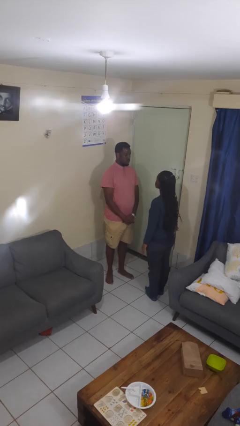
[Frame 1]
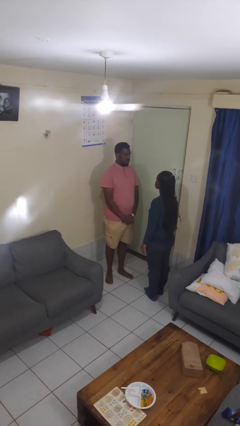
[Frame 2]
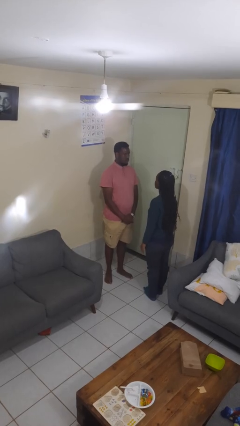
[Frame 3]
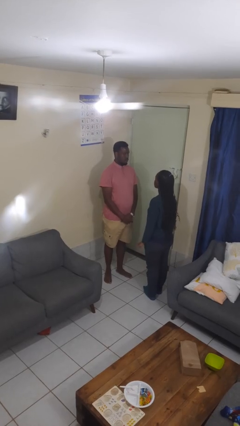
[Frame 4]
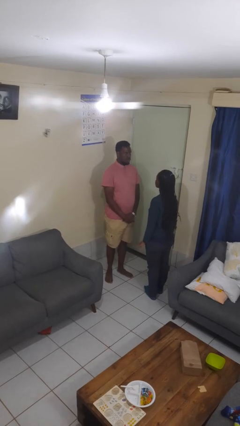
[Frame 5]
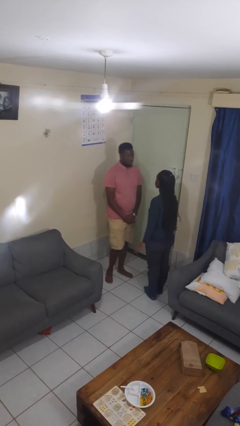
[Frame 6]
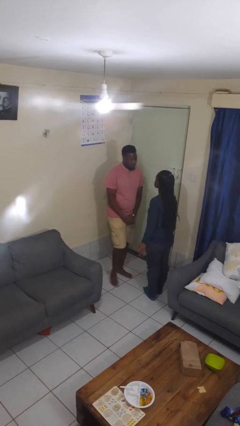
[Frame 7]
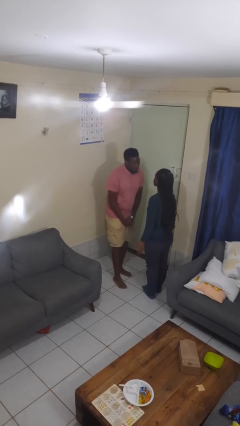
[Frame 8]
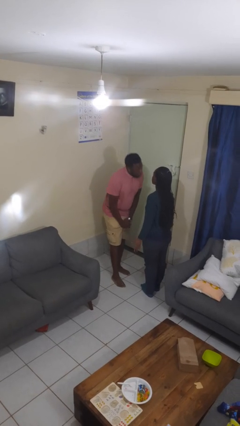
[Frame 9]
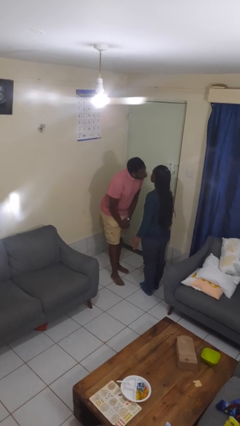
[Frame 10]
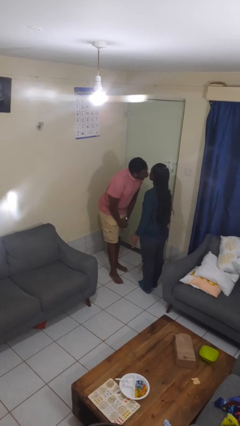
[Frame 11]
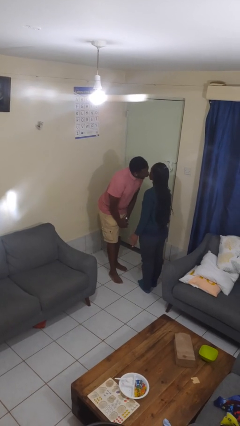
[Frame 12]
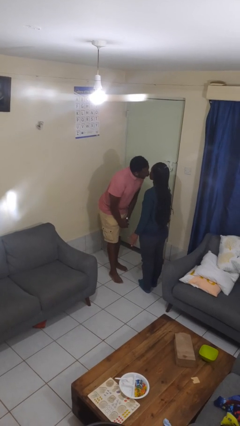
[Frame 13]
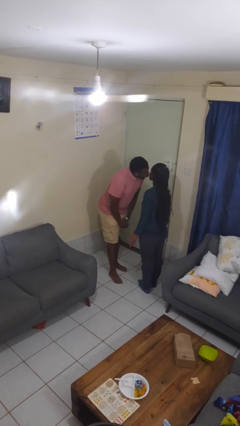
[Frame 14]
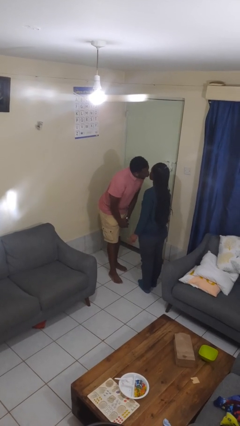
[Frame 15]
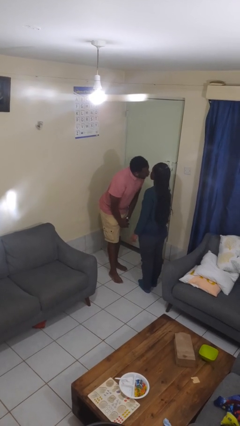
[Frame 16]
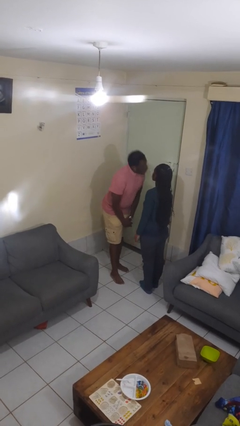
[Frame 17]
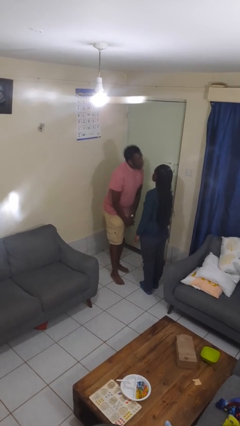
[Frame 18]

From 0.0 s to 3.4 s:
person kisses cheek of person

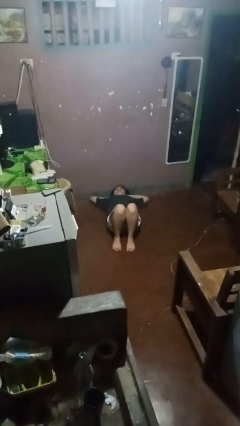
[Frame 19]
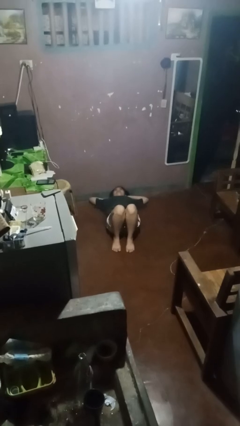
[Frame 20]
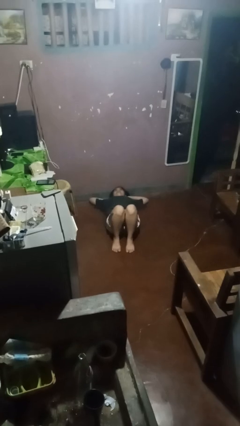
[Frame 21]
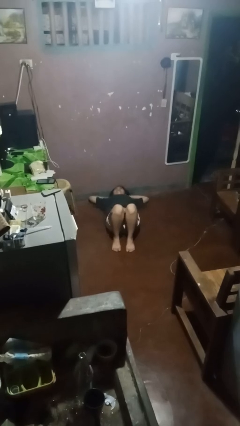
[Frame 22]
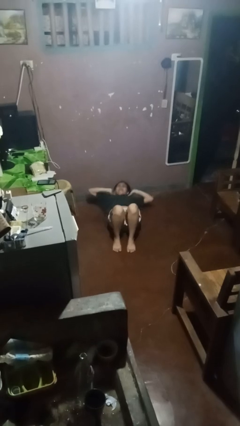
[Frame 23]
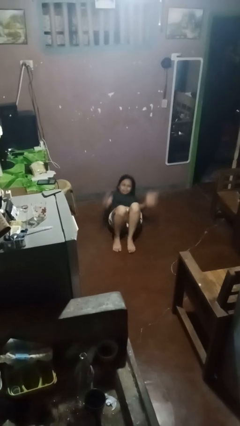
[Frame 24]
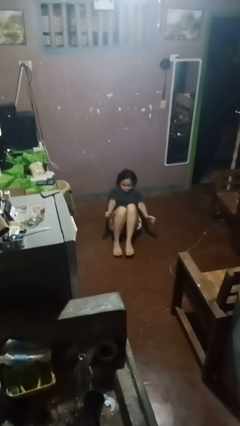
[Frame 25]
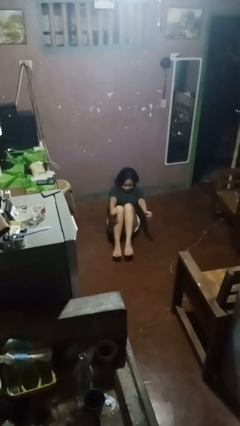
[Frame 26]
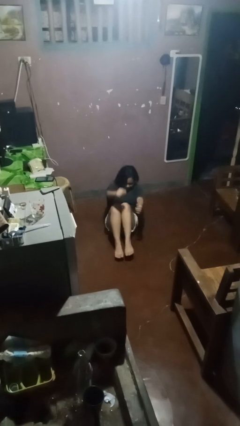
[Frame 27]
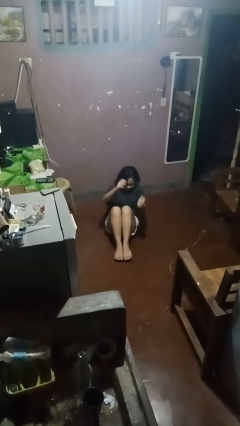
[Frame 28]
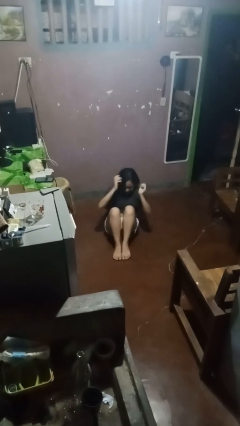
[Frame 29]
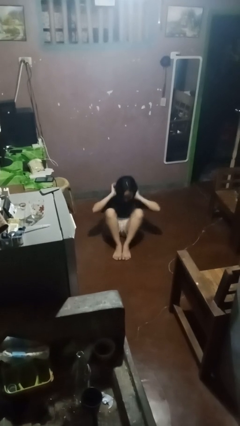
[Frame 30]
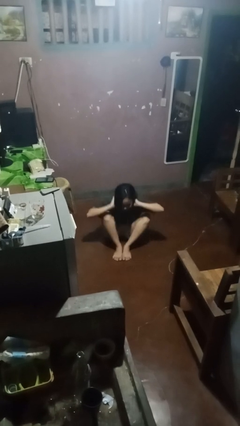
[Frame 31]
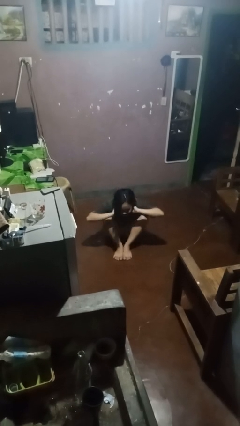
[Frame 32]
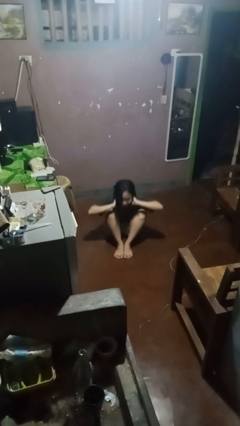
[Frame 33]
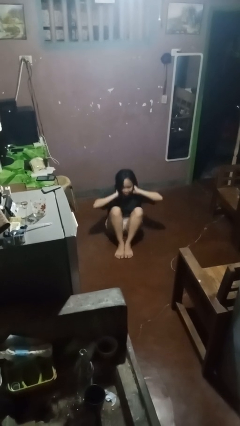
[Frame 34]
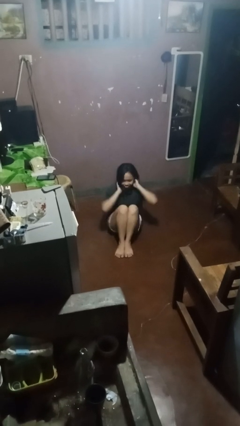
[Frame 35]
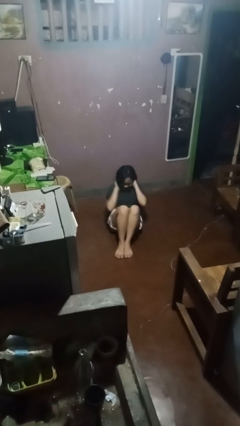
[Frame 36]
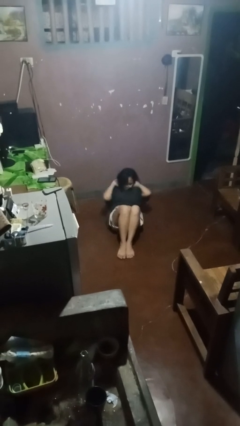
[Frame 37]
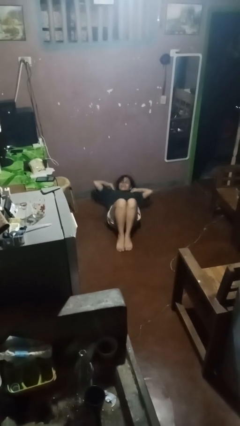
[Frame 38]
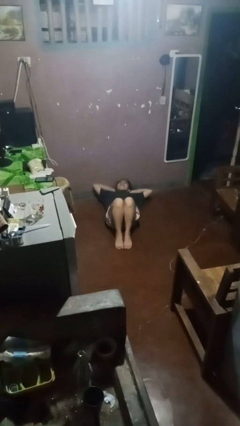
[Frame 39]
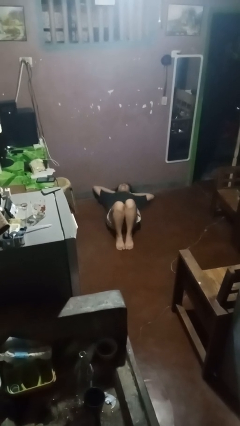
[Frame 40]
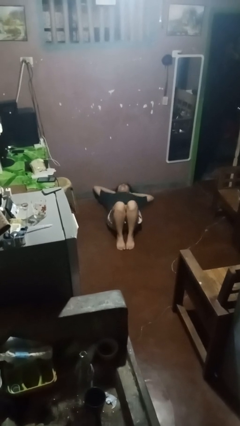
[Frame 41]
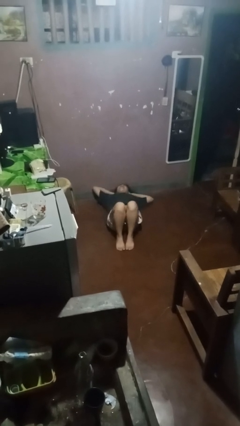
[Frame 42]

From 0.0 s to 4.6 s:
person exercises with situp

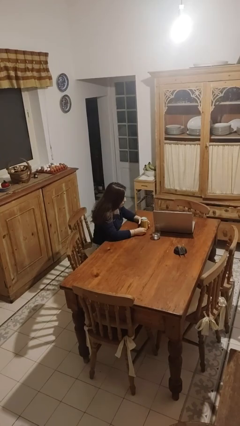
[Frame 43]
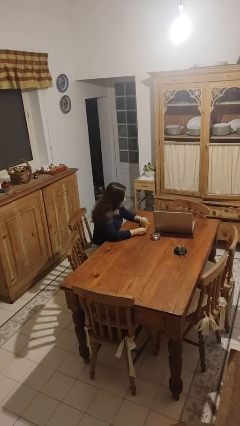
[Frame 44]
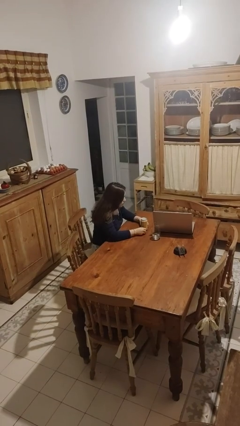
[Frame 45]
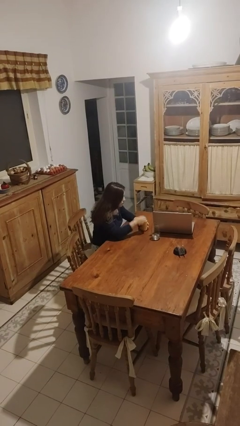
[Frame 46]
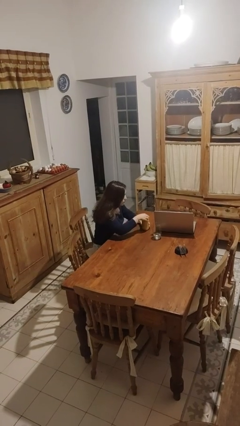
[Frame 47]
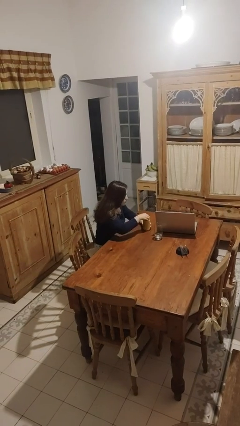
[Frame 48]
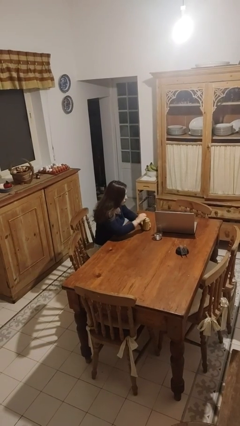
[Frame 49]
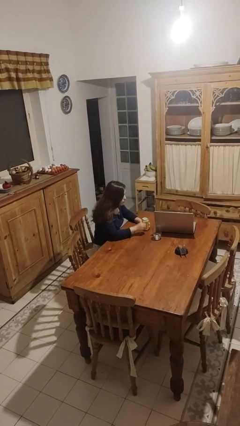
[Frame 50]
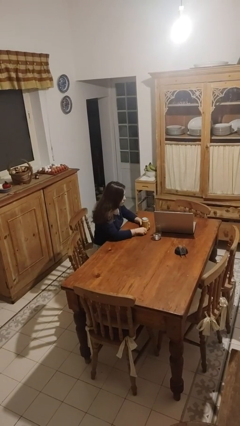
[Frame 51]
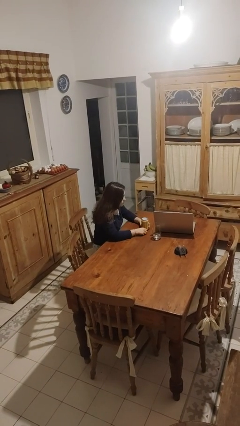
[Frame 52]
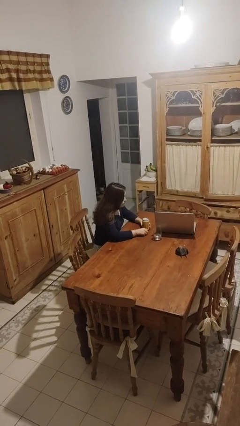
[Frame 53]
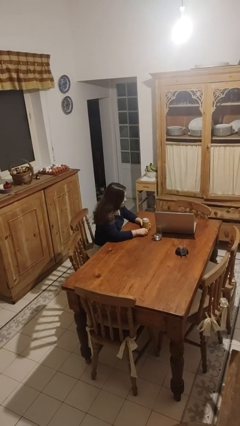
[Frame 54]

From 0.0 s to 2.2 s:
person opens beverage can

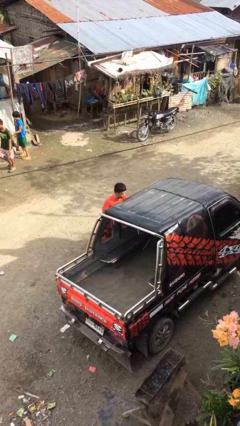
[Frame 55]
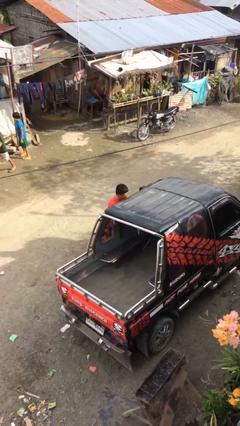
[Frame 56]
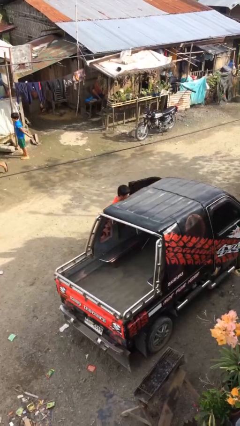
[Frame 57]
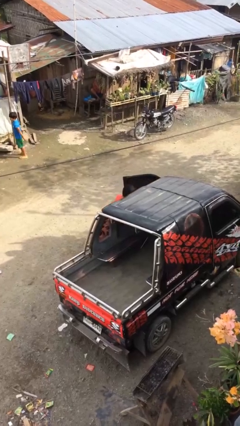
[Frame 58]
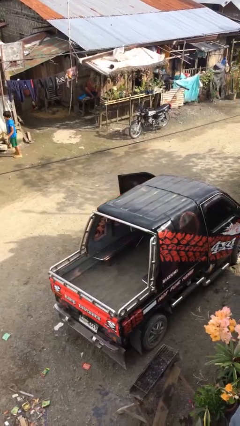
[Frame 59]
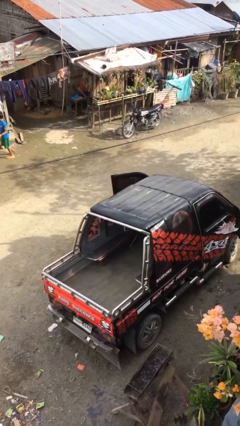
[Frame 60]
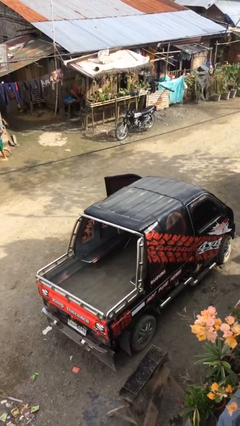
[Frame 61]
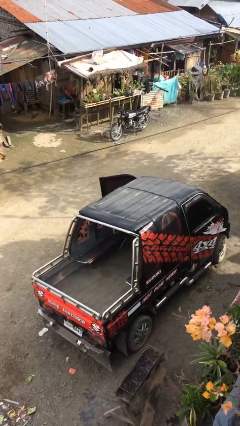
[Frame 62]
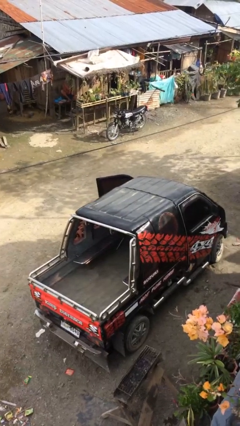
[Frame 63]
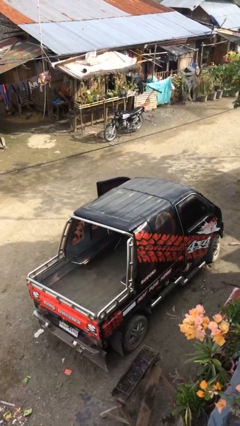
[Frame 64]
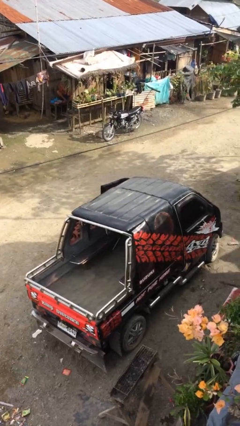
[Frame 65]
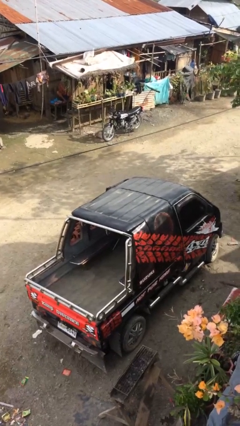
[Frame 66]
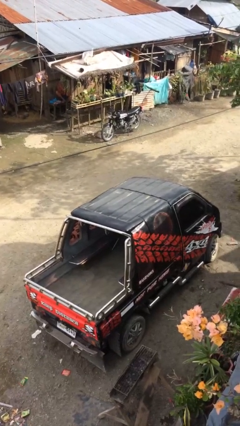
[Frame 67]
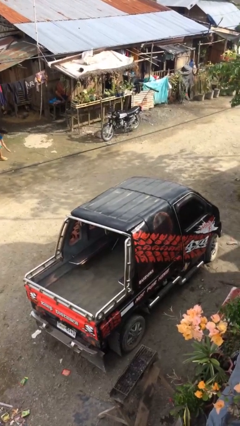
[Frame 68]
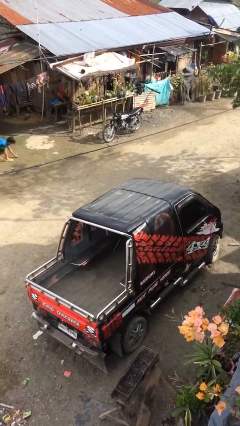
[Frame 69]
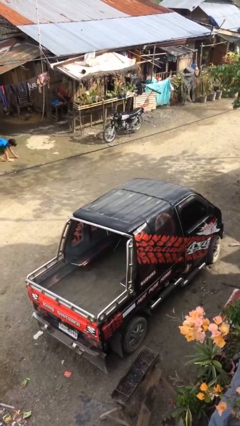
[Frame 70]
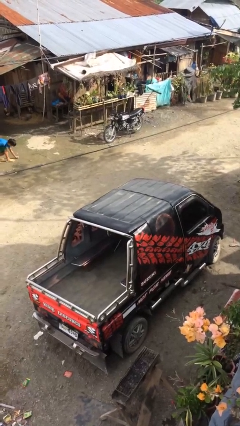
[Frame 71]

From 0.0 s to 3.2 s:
person enters car

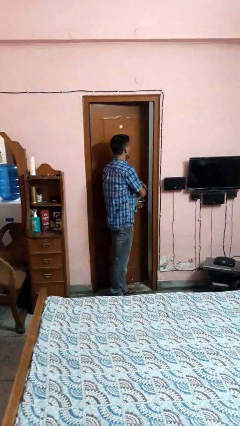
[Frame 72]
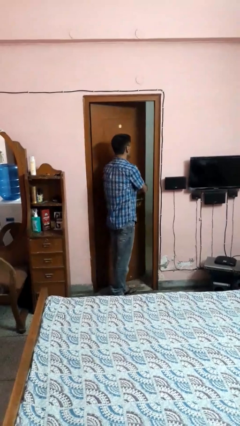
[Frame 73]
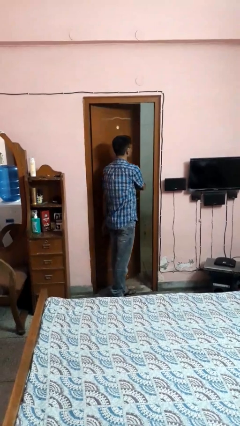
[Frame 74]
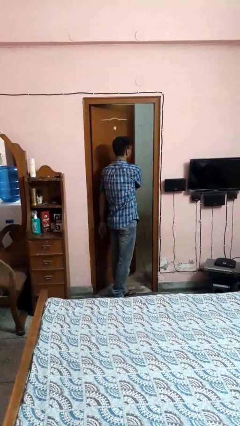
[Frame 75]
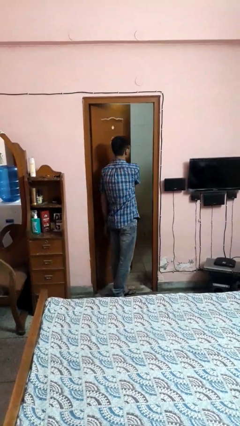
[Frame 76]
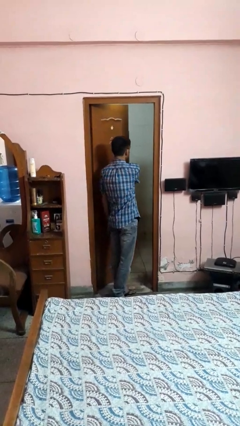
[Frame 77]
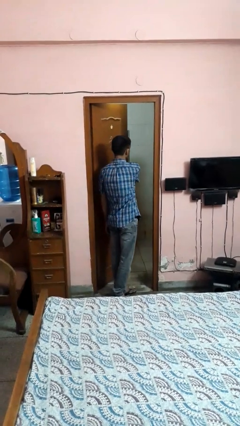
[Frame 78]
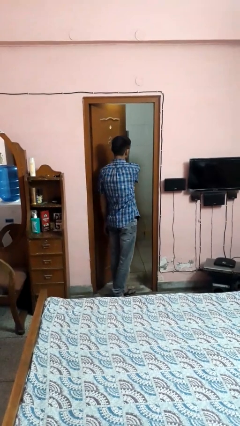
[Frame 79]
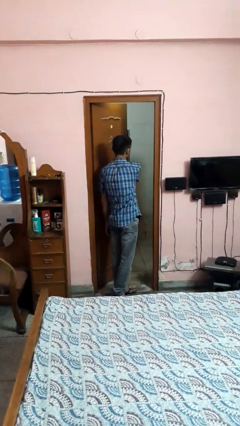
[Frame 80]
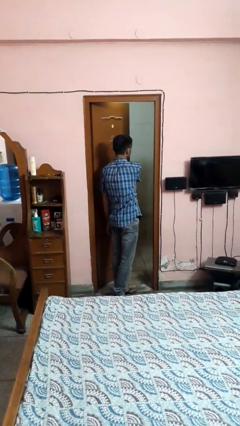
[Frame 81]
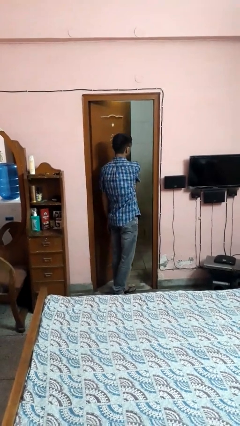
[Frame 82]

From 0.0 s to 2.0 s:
person opens facility door

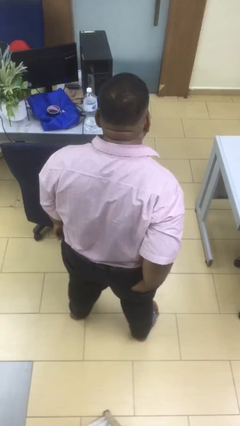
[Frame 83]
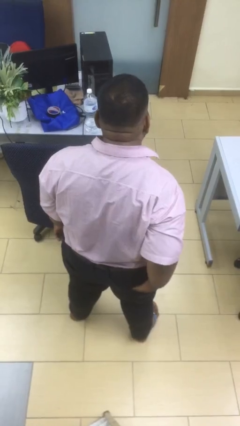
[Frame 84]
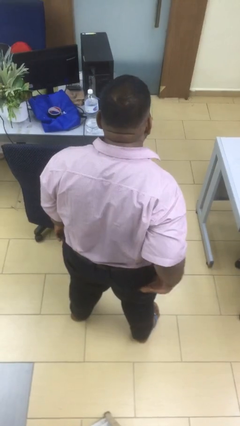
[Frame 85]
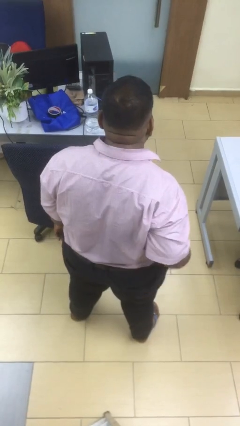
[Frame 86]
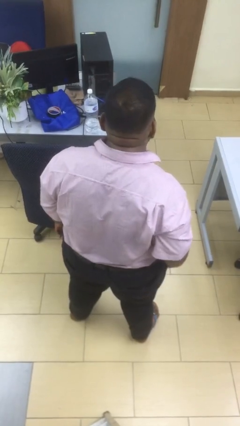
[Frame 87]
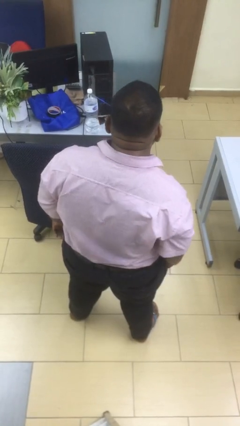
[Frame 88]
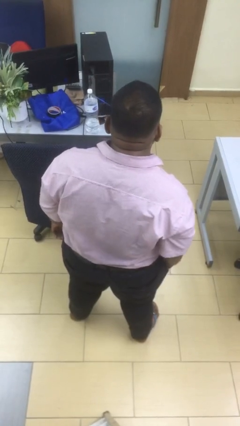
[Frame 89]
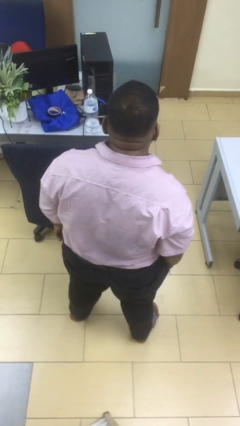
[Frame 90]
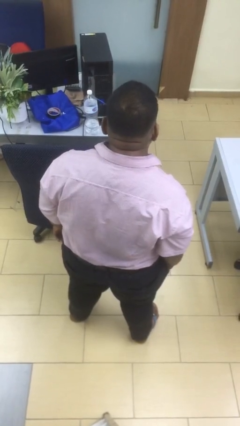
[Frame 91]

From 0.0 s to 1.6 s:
person puts hands in back pockets

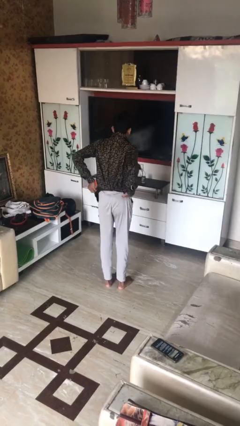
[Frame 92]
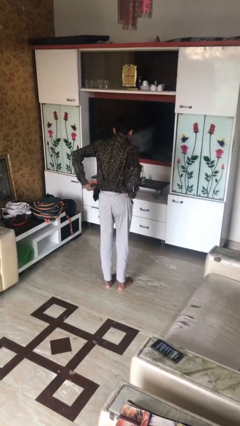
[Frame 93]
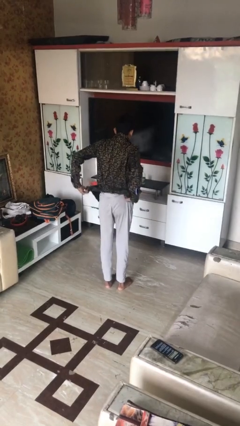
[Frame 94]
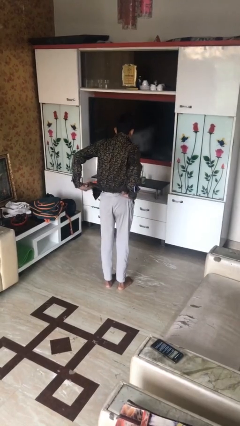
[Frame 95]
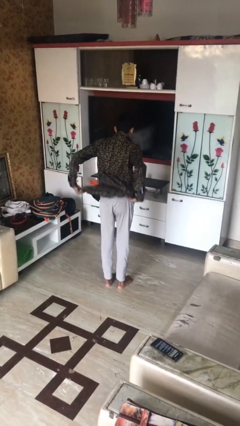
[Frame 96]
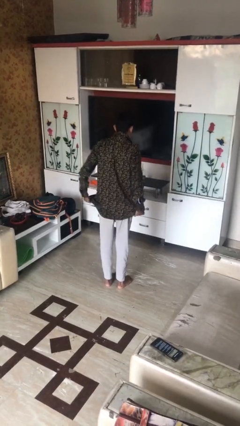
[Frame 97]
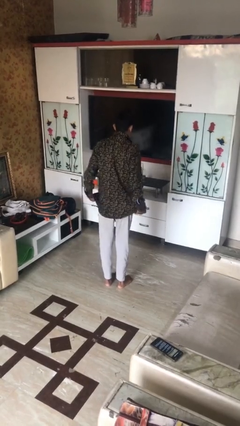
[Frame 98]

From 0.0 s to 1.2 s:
person untucks shirt